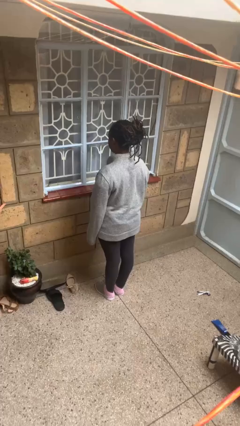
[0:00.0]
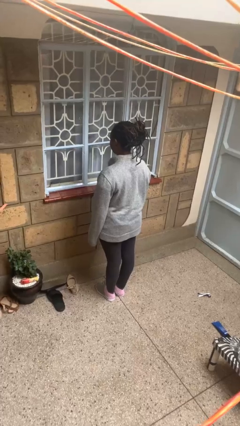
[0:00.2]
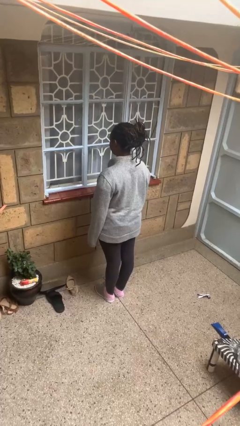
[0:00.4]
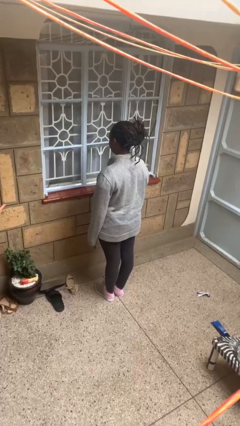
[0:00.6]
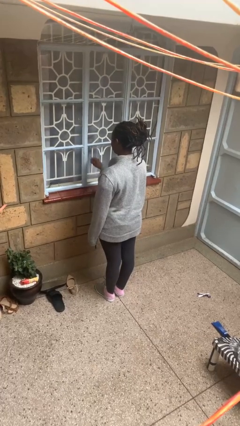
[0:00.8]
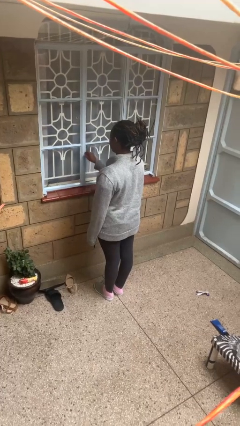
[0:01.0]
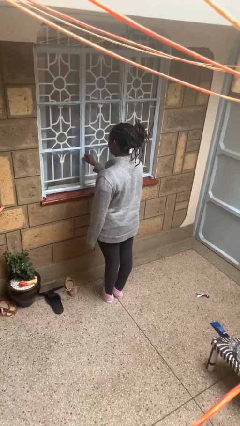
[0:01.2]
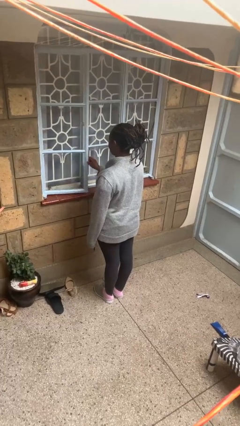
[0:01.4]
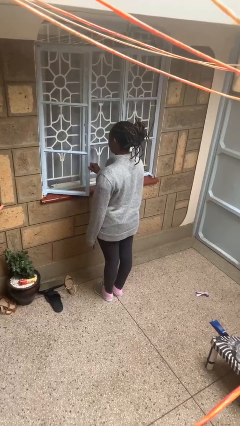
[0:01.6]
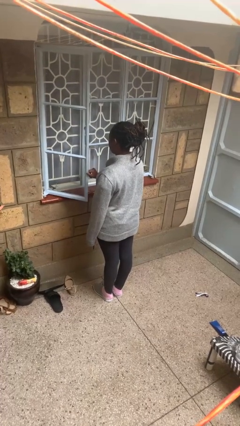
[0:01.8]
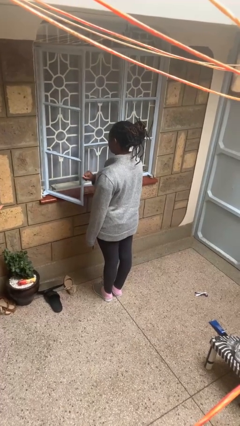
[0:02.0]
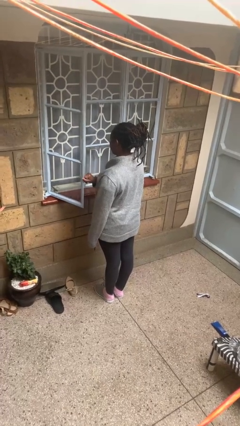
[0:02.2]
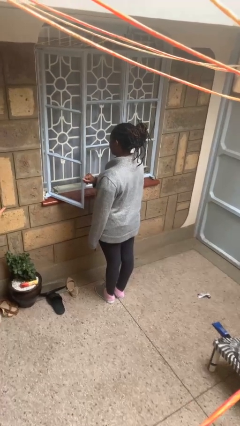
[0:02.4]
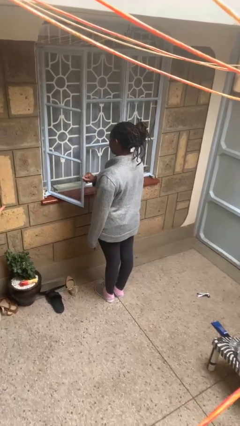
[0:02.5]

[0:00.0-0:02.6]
person opens home window

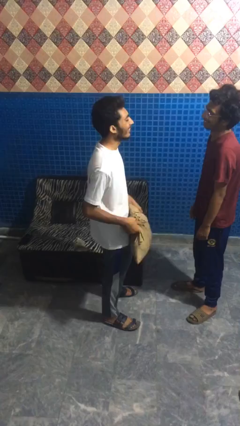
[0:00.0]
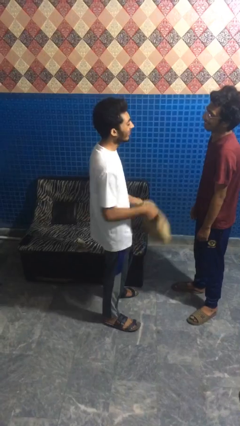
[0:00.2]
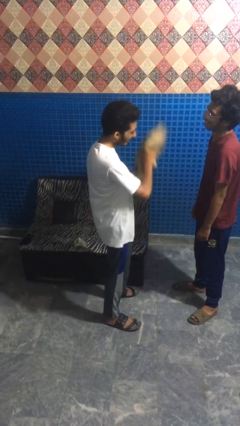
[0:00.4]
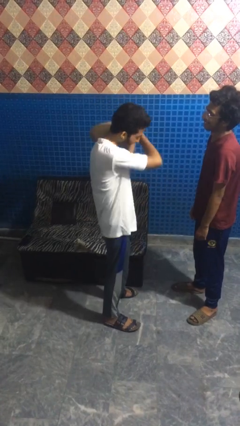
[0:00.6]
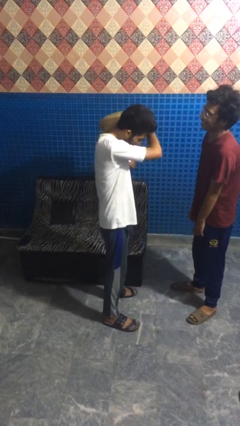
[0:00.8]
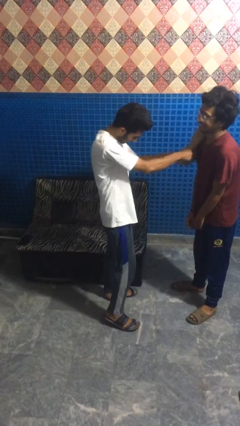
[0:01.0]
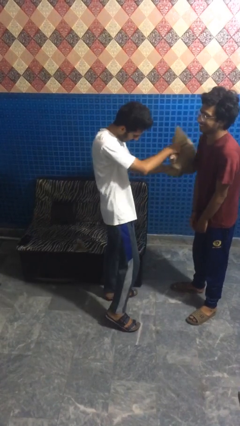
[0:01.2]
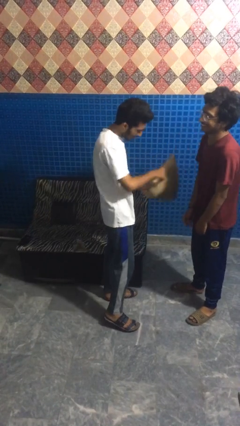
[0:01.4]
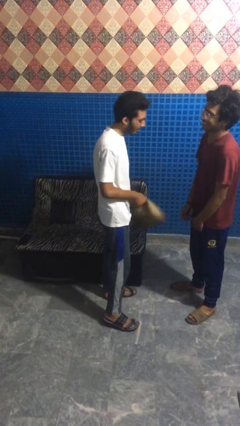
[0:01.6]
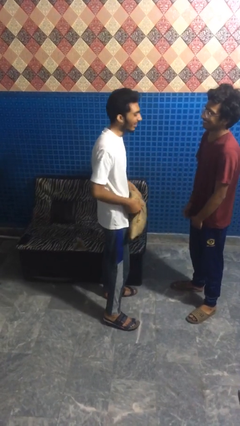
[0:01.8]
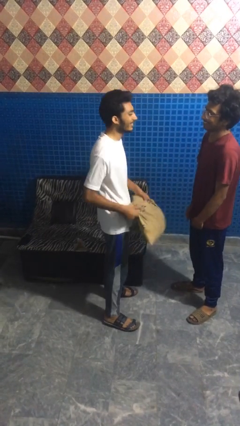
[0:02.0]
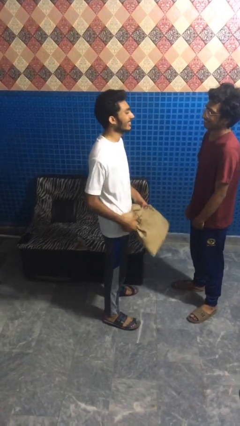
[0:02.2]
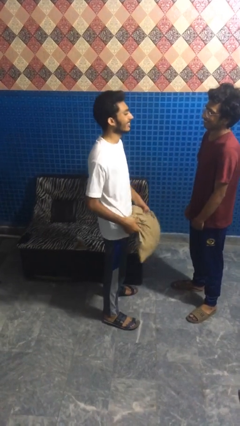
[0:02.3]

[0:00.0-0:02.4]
person hits person with pillow

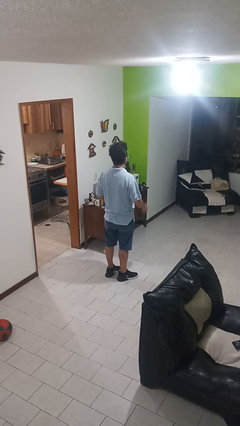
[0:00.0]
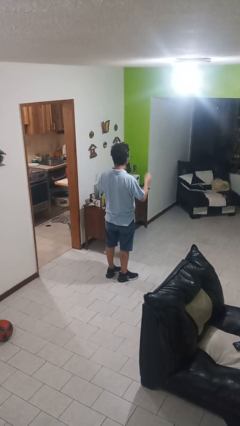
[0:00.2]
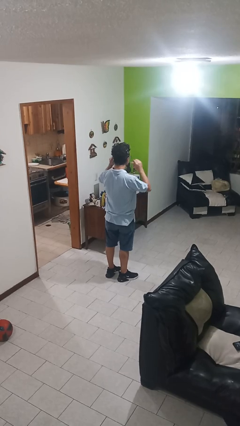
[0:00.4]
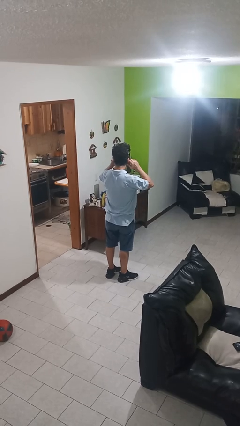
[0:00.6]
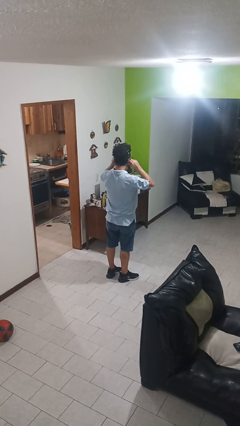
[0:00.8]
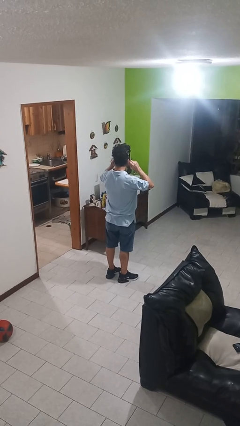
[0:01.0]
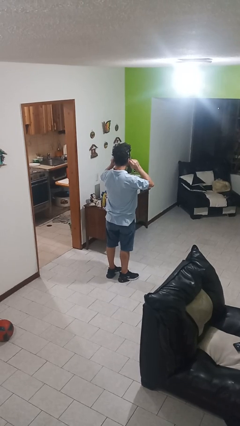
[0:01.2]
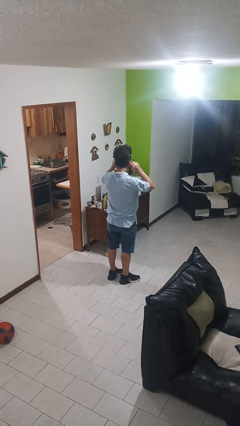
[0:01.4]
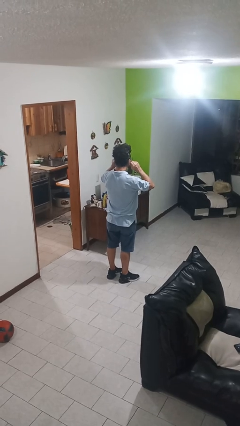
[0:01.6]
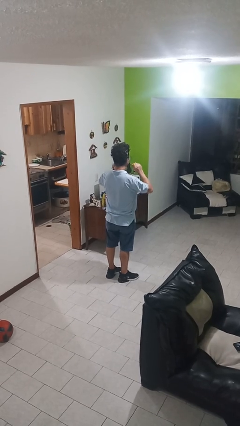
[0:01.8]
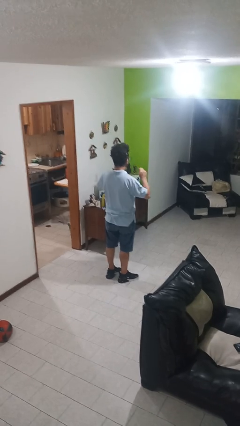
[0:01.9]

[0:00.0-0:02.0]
person touches earlobe

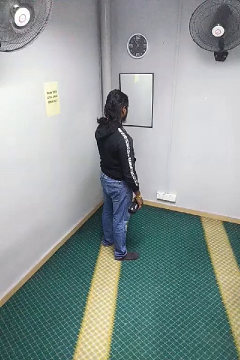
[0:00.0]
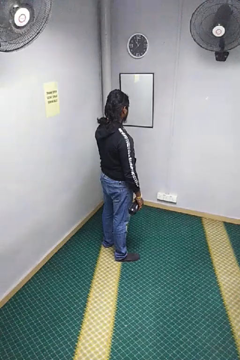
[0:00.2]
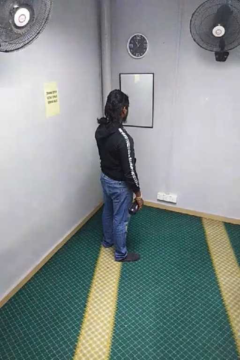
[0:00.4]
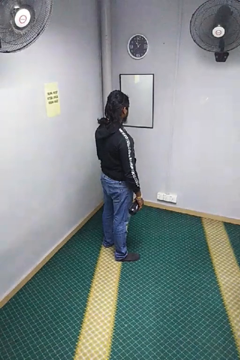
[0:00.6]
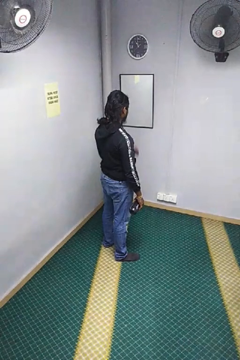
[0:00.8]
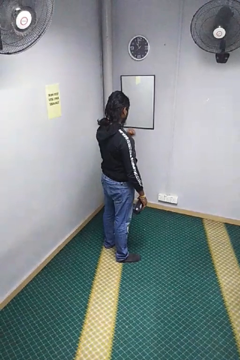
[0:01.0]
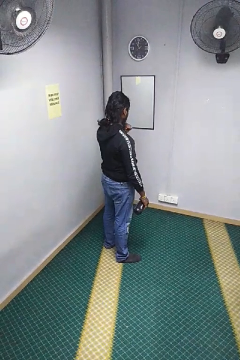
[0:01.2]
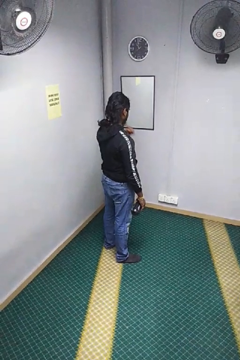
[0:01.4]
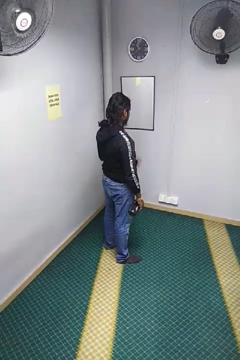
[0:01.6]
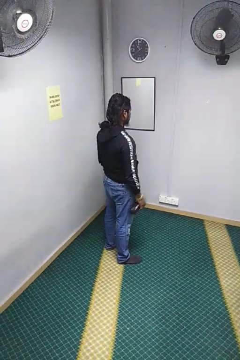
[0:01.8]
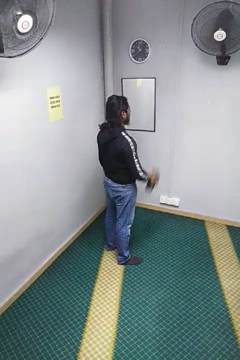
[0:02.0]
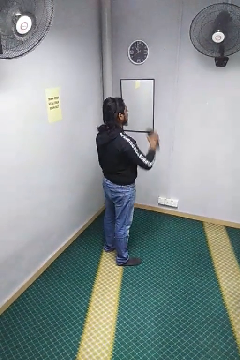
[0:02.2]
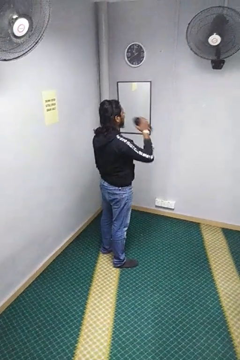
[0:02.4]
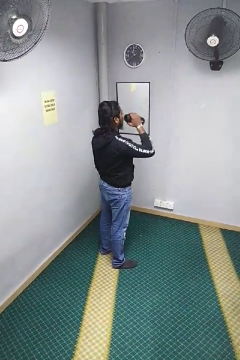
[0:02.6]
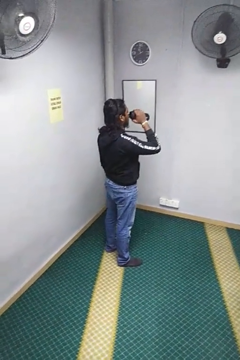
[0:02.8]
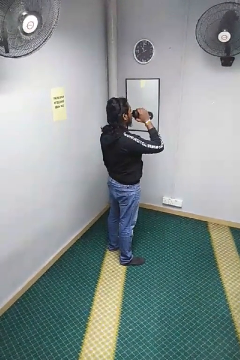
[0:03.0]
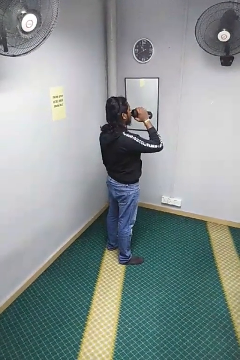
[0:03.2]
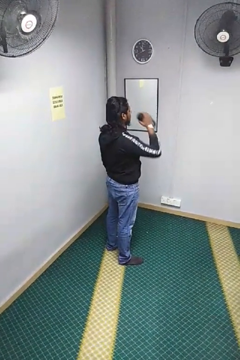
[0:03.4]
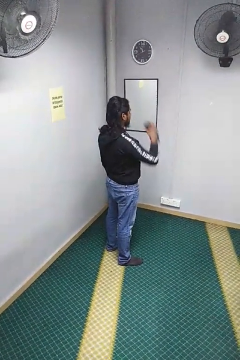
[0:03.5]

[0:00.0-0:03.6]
person drinks from bottle

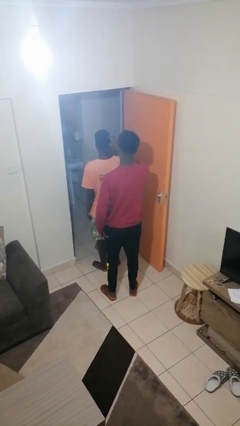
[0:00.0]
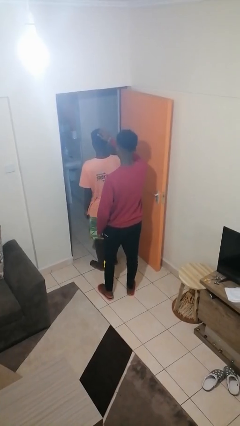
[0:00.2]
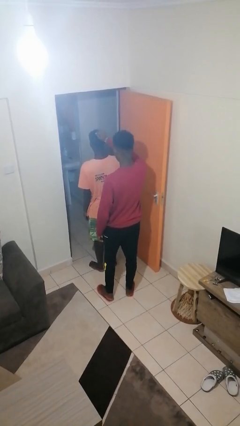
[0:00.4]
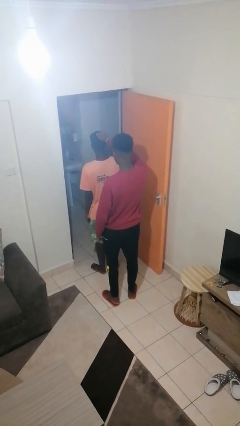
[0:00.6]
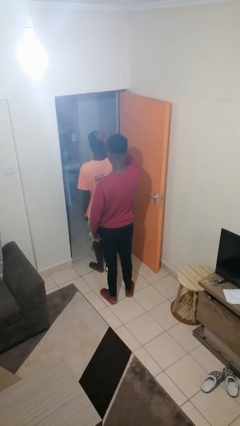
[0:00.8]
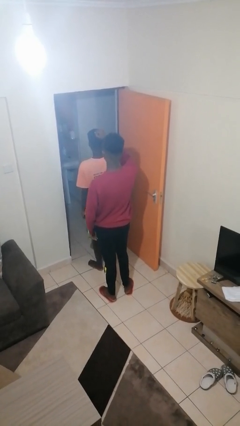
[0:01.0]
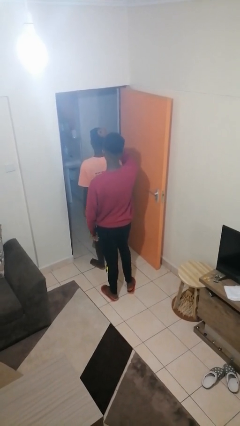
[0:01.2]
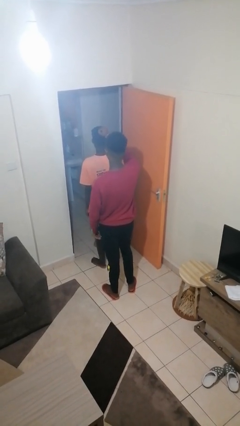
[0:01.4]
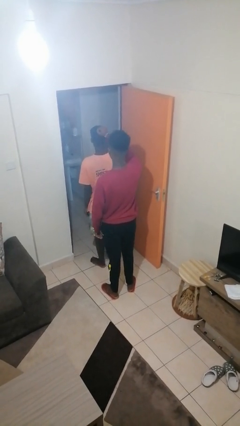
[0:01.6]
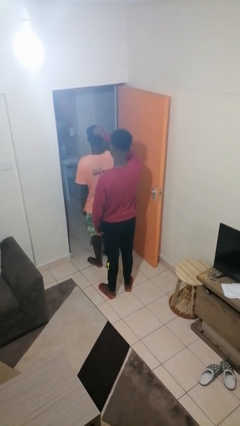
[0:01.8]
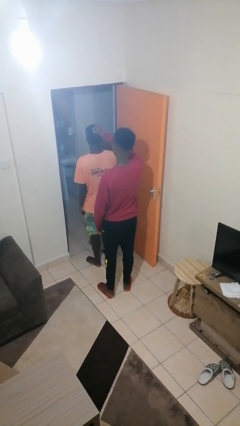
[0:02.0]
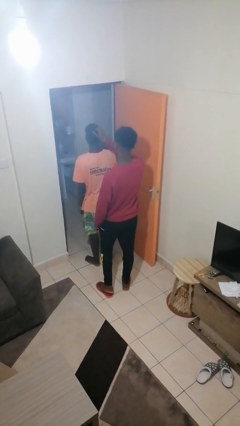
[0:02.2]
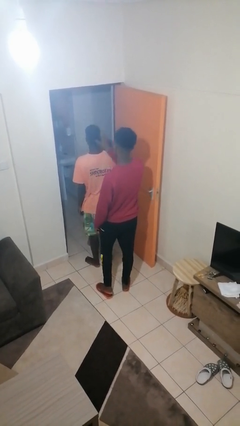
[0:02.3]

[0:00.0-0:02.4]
person grabs person by hair

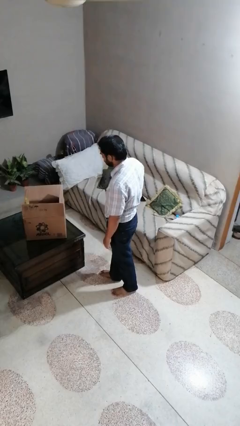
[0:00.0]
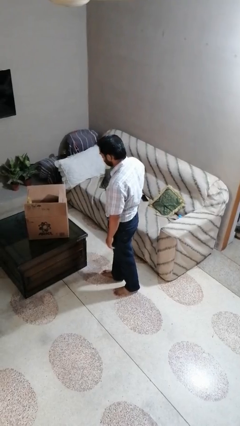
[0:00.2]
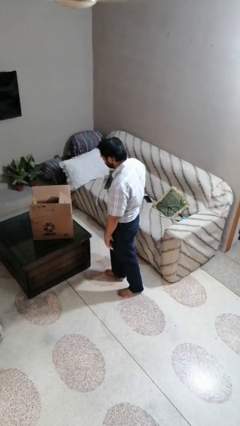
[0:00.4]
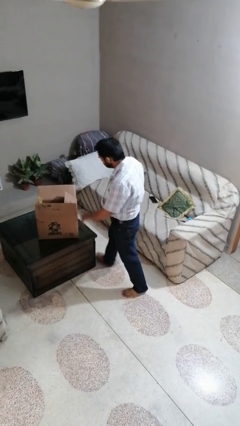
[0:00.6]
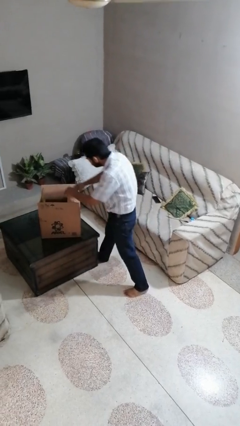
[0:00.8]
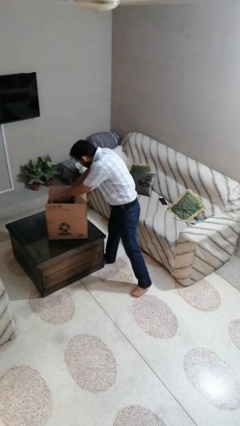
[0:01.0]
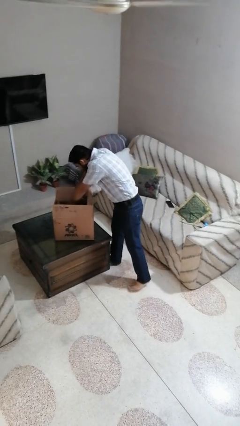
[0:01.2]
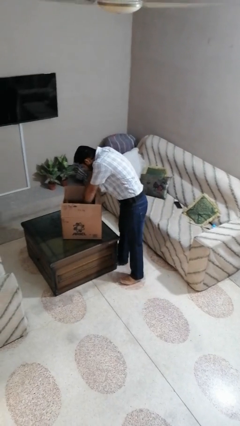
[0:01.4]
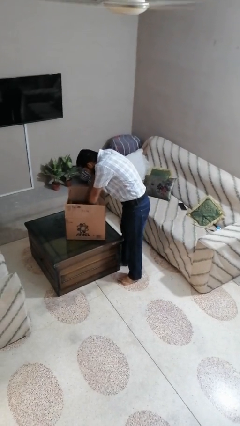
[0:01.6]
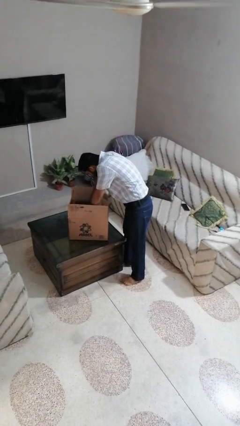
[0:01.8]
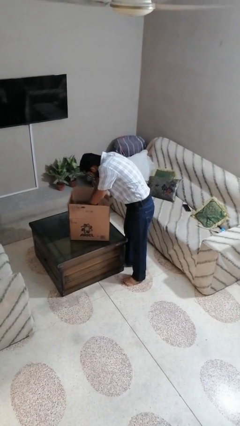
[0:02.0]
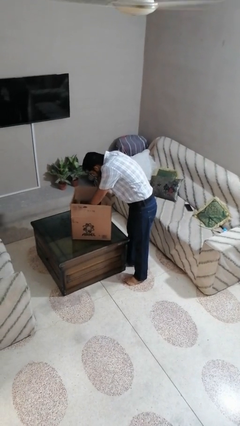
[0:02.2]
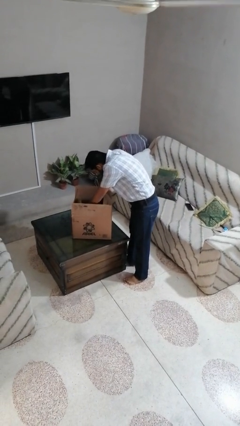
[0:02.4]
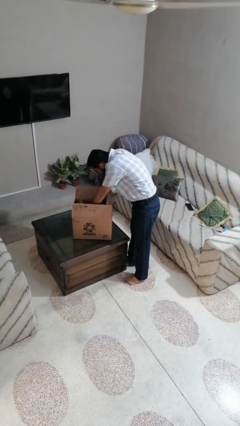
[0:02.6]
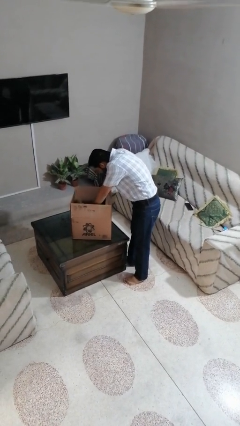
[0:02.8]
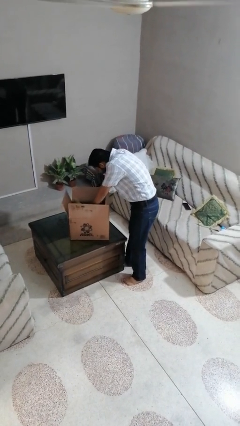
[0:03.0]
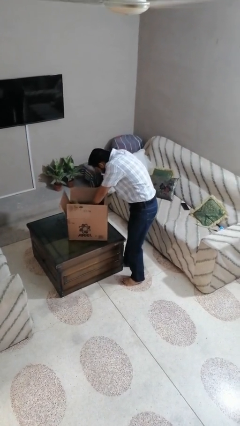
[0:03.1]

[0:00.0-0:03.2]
person searches in box

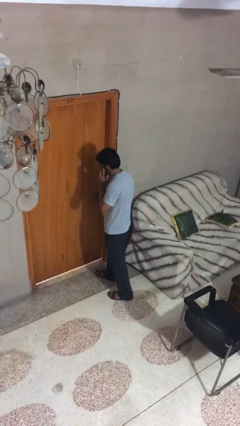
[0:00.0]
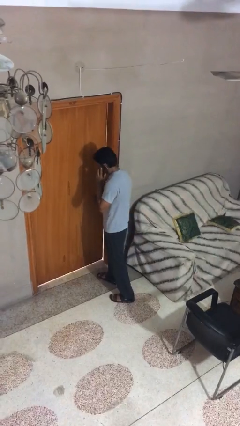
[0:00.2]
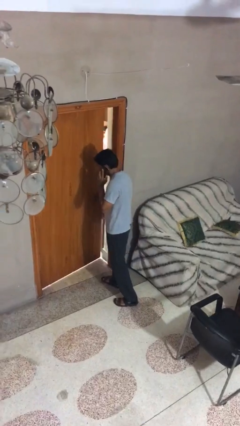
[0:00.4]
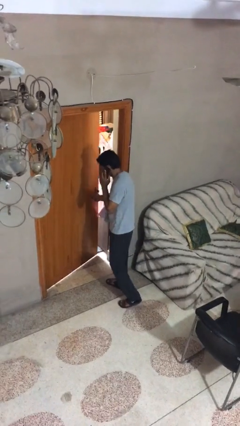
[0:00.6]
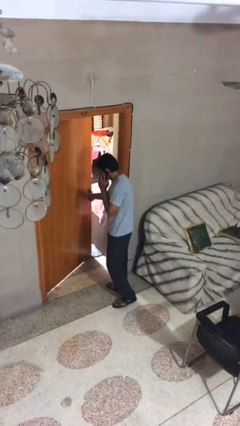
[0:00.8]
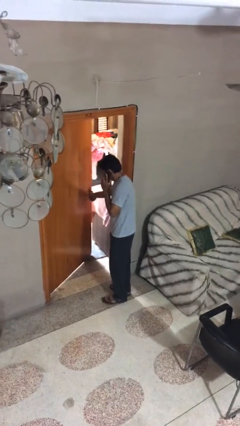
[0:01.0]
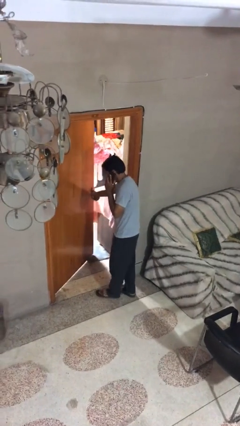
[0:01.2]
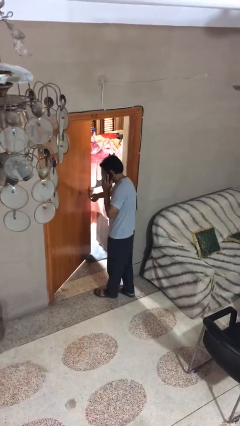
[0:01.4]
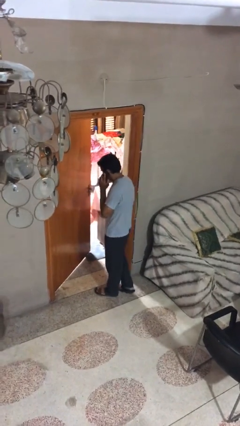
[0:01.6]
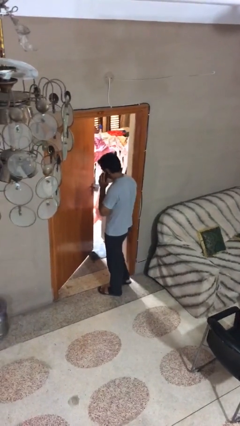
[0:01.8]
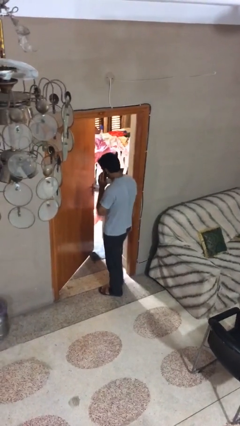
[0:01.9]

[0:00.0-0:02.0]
person opens facility door
